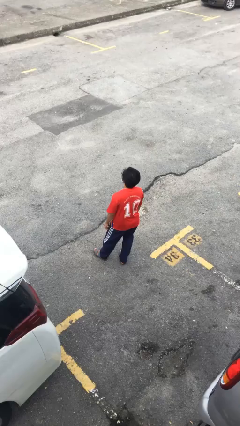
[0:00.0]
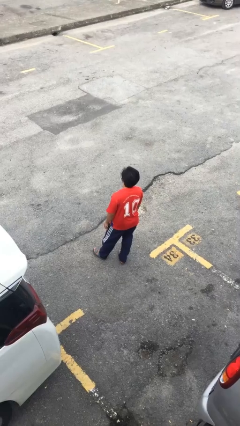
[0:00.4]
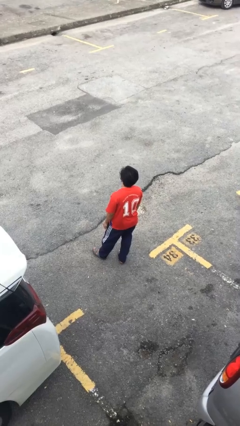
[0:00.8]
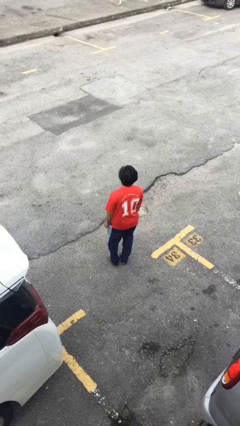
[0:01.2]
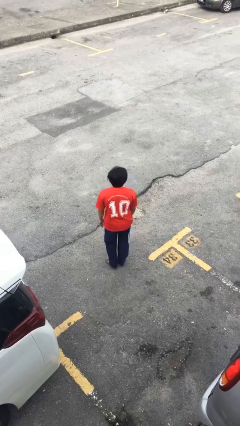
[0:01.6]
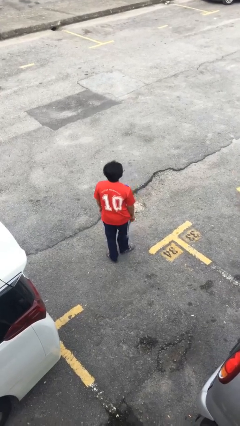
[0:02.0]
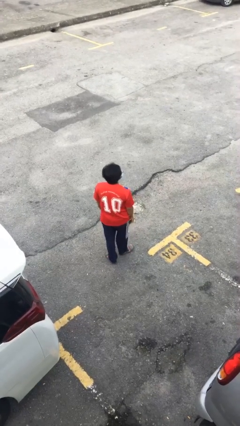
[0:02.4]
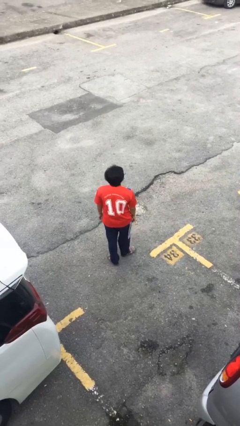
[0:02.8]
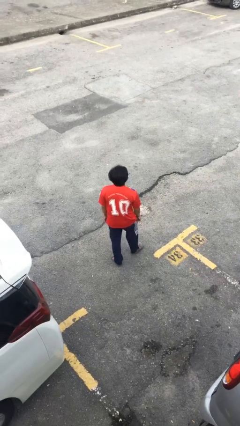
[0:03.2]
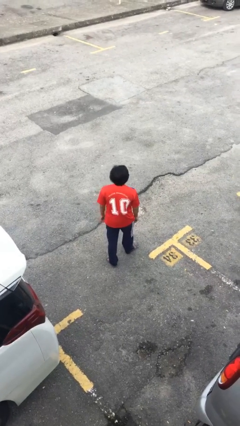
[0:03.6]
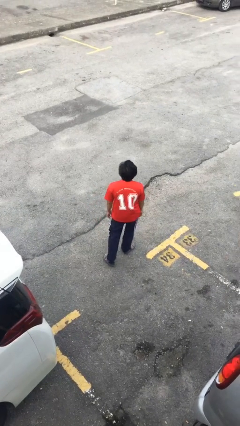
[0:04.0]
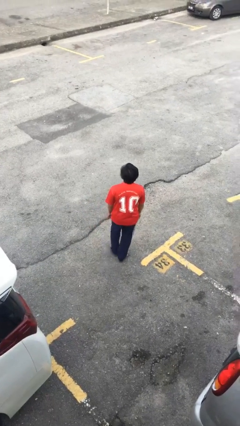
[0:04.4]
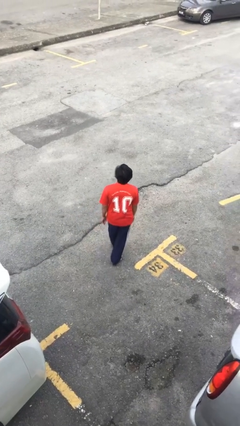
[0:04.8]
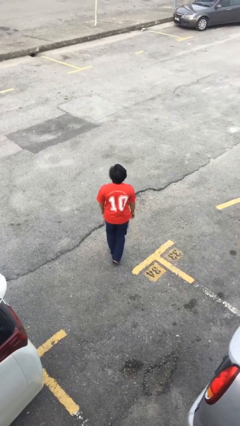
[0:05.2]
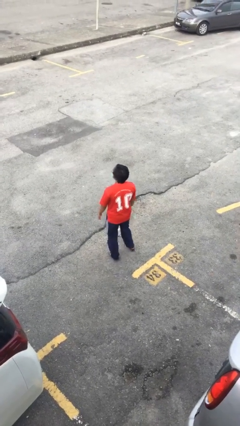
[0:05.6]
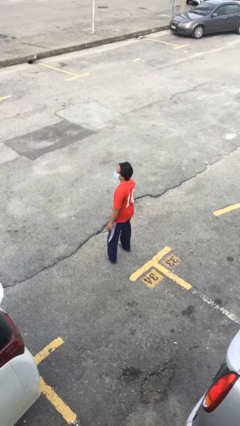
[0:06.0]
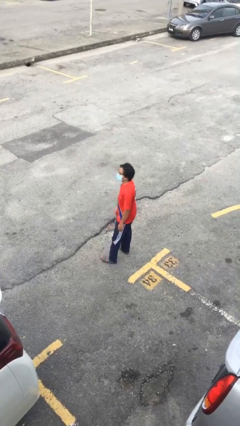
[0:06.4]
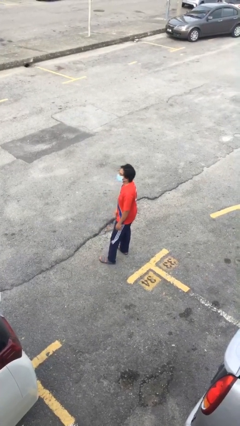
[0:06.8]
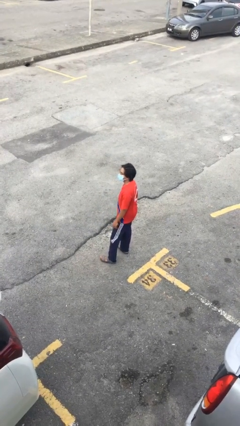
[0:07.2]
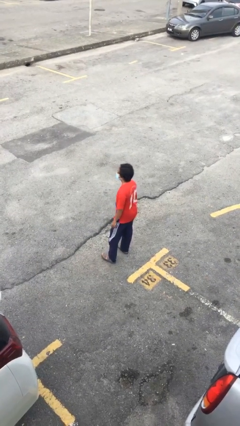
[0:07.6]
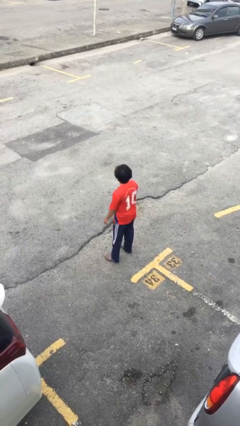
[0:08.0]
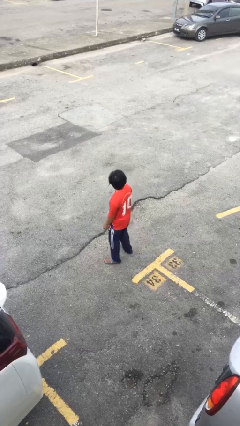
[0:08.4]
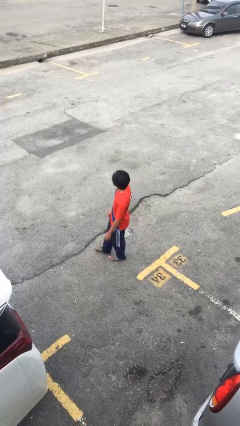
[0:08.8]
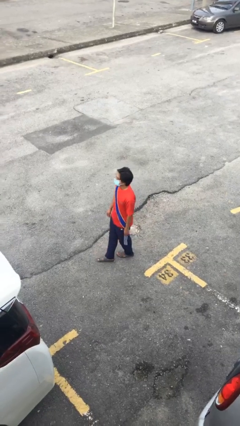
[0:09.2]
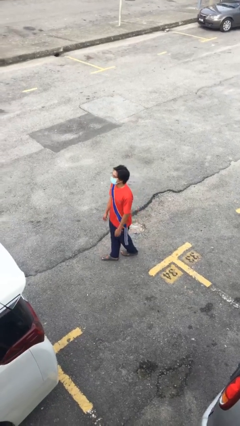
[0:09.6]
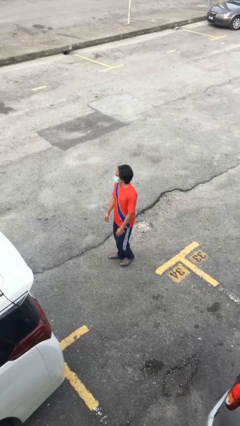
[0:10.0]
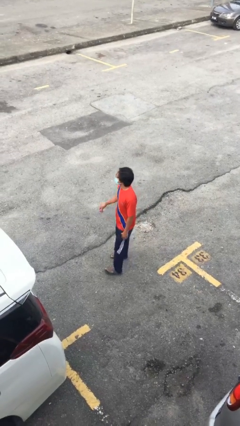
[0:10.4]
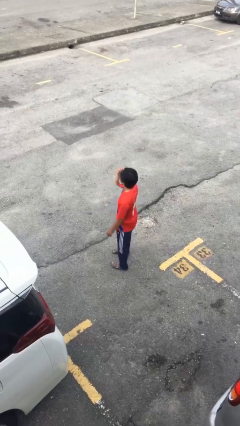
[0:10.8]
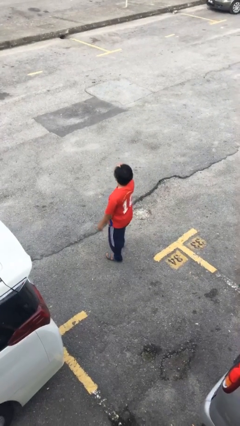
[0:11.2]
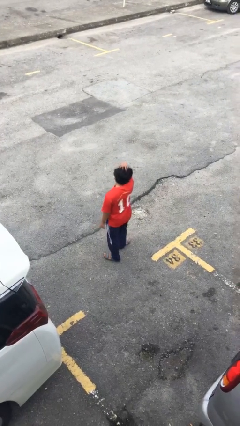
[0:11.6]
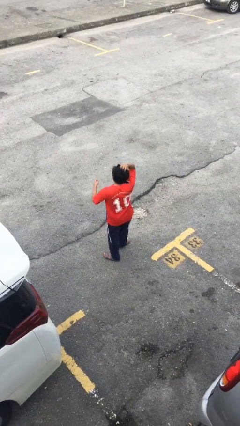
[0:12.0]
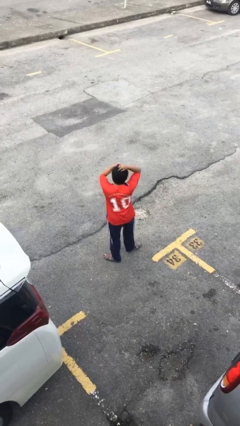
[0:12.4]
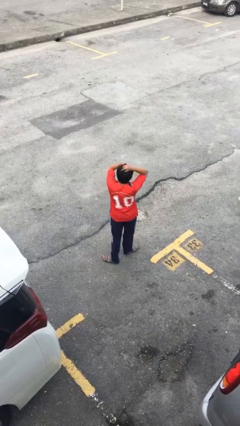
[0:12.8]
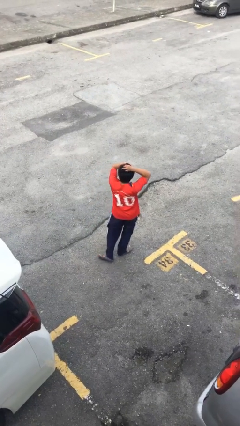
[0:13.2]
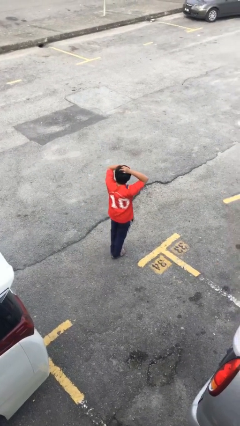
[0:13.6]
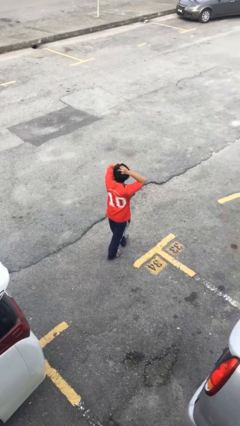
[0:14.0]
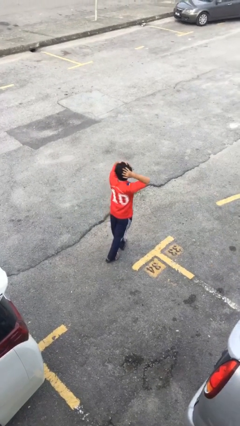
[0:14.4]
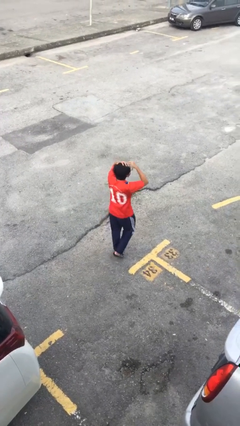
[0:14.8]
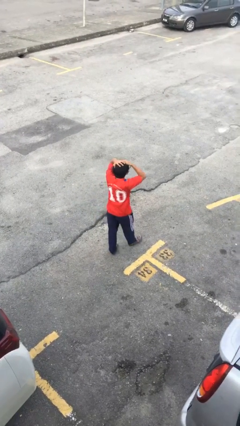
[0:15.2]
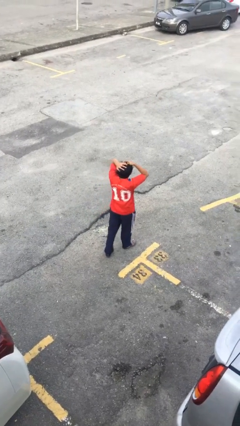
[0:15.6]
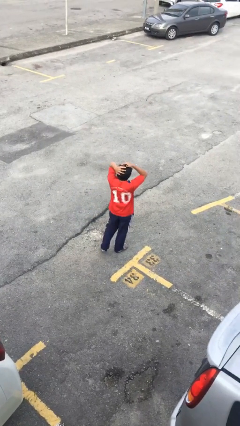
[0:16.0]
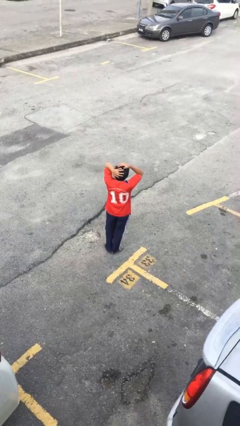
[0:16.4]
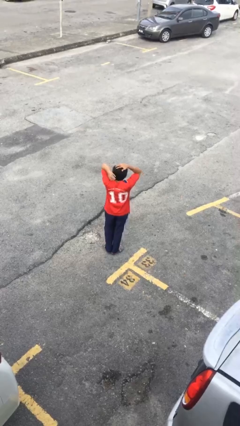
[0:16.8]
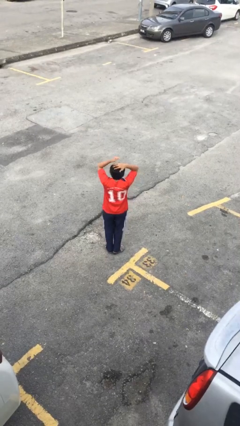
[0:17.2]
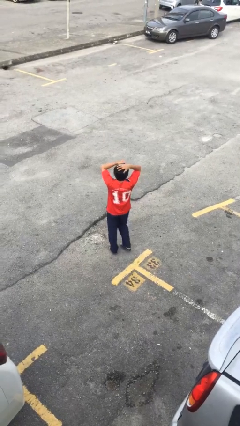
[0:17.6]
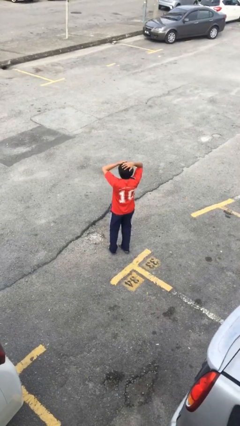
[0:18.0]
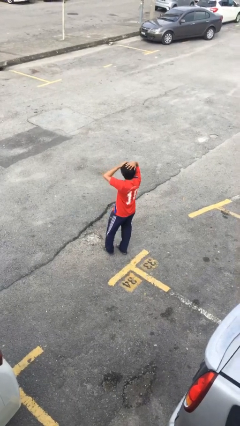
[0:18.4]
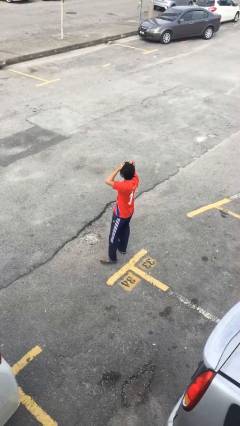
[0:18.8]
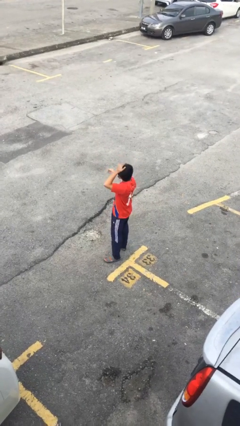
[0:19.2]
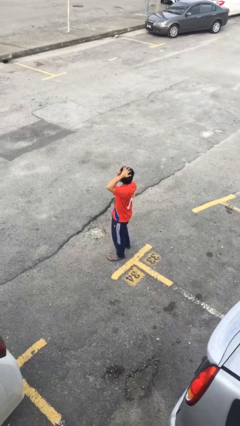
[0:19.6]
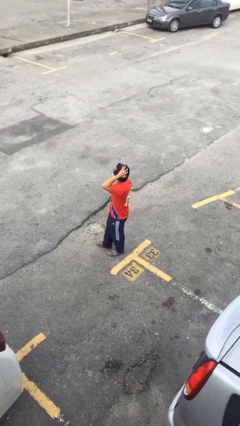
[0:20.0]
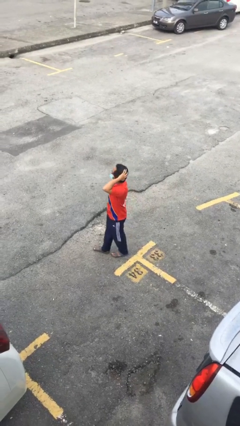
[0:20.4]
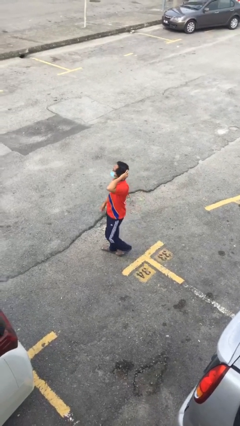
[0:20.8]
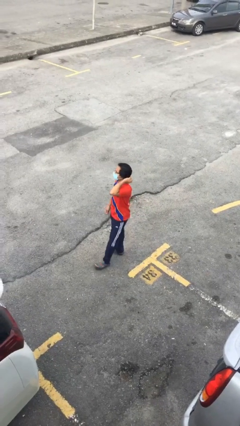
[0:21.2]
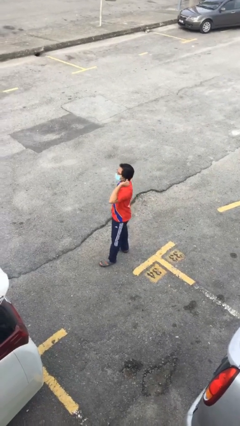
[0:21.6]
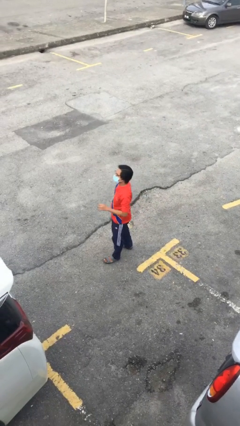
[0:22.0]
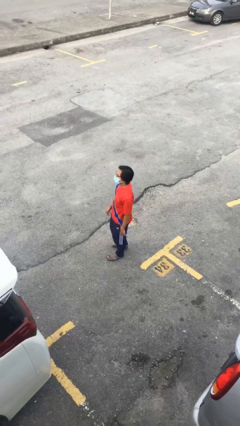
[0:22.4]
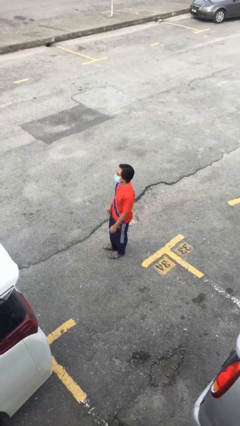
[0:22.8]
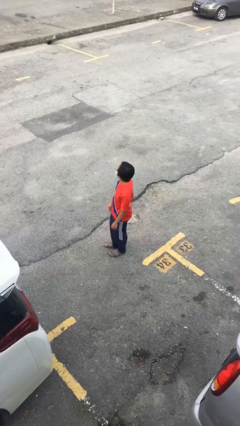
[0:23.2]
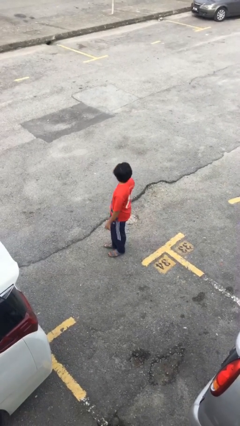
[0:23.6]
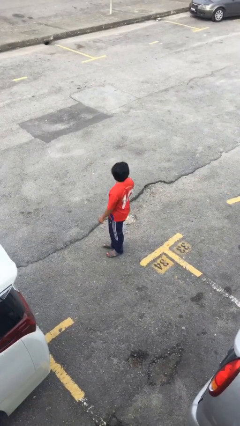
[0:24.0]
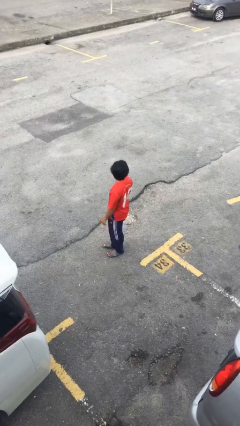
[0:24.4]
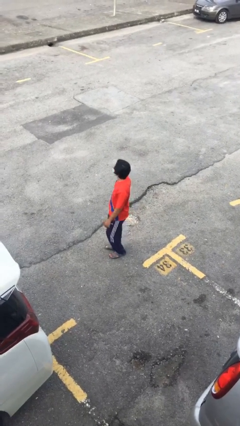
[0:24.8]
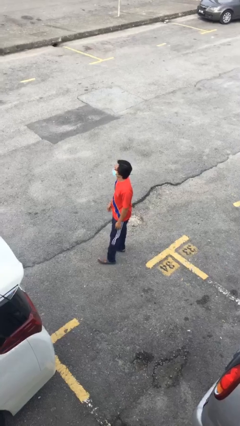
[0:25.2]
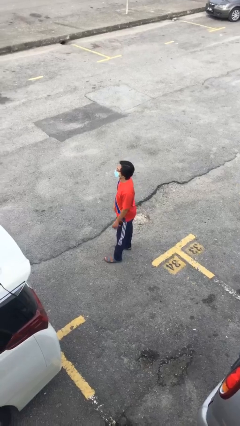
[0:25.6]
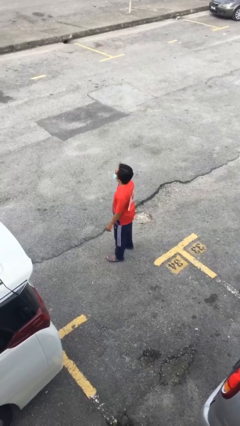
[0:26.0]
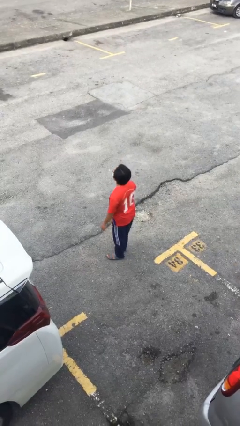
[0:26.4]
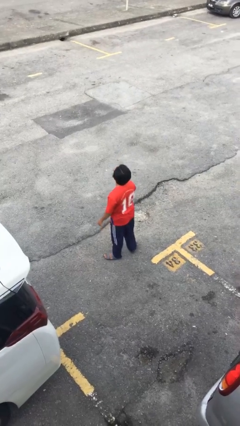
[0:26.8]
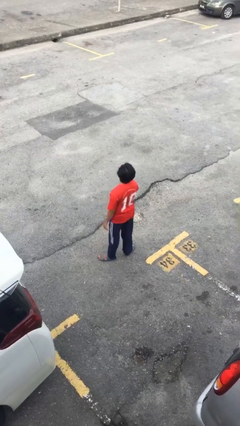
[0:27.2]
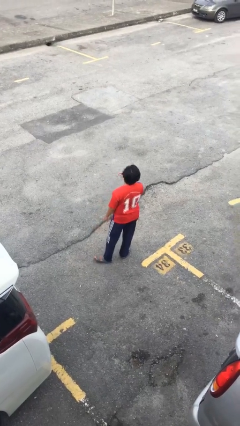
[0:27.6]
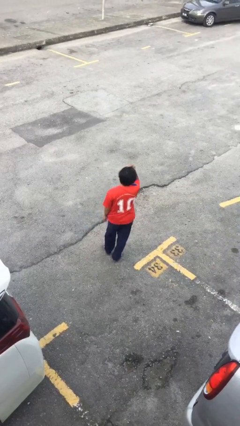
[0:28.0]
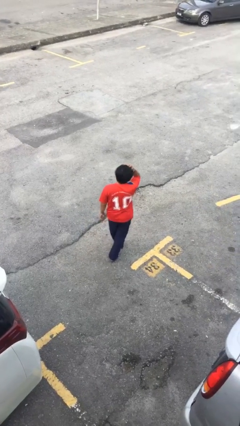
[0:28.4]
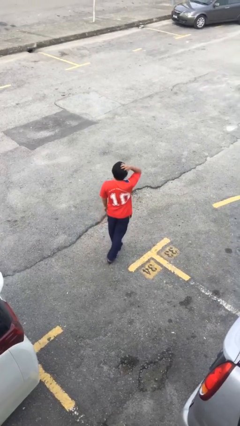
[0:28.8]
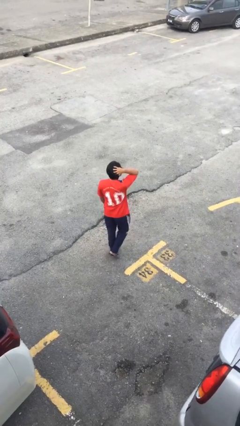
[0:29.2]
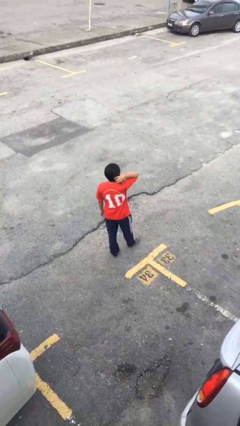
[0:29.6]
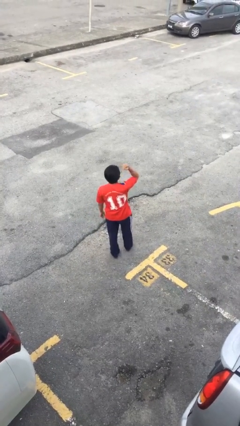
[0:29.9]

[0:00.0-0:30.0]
person walks

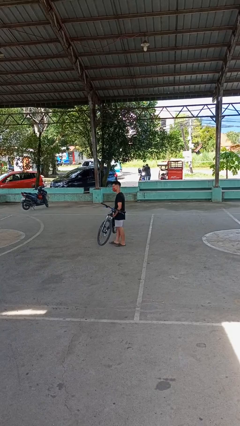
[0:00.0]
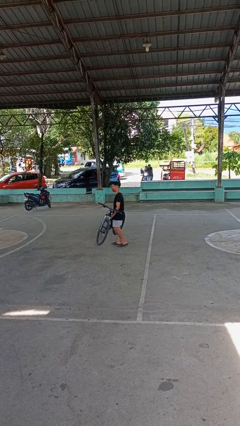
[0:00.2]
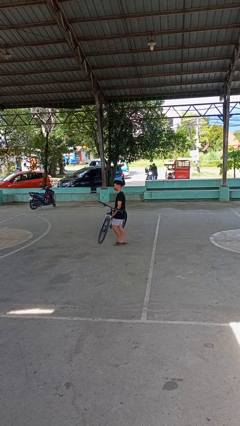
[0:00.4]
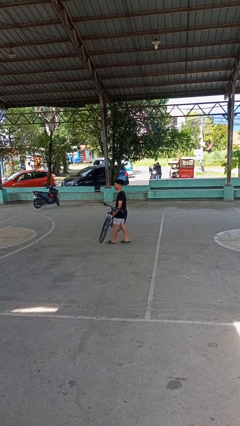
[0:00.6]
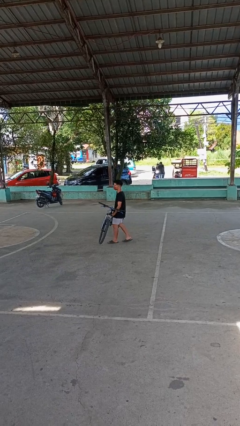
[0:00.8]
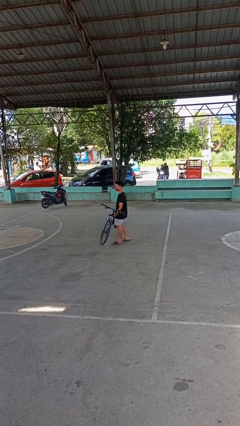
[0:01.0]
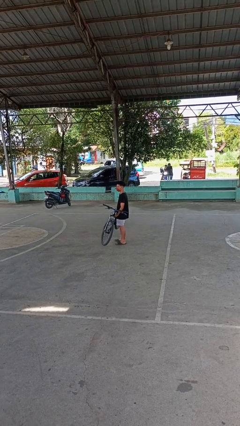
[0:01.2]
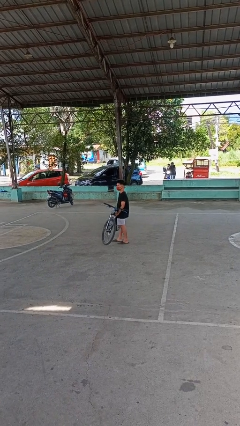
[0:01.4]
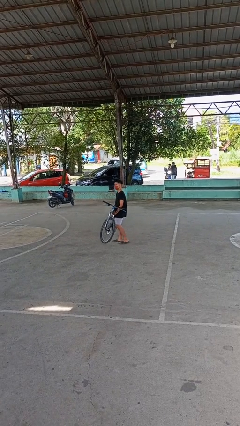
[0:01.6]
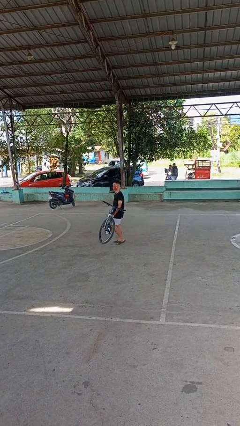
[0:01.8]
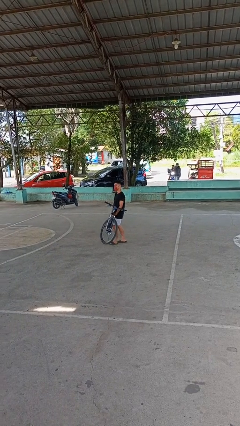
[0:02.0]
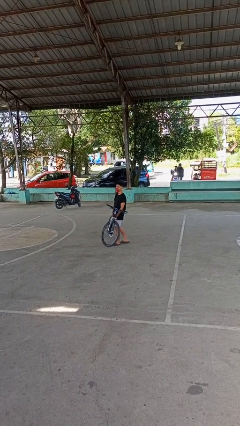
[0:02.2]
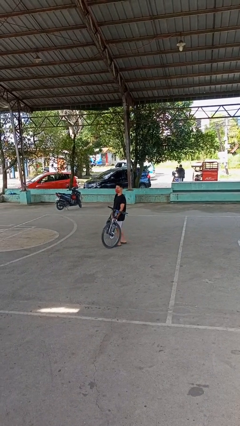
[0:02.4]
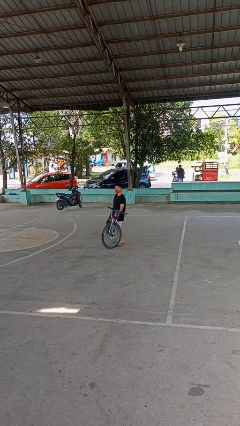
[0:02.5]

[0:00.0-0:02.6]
person carries bicycle

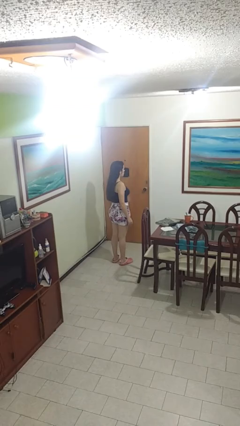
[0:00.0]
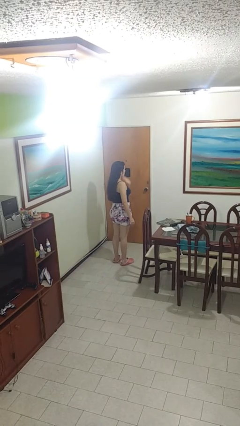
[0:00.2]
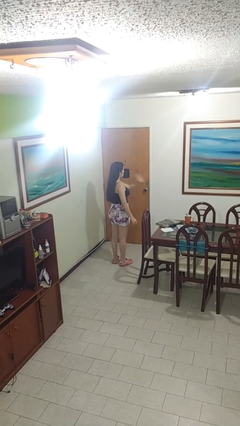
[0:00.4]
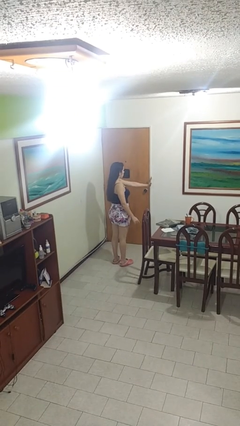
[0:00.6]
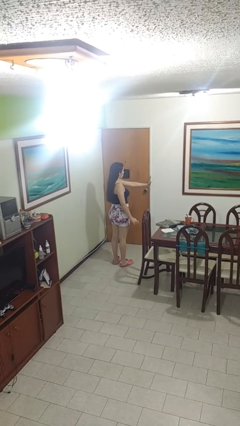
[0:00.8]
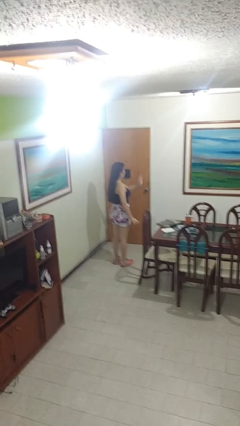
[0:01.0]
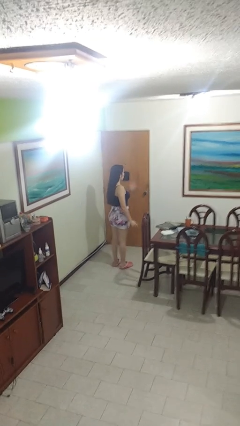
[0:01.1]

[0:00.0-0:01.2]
person gestures stop
